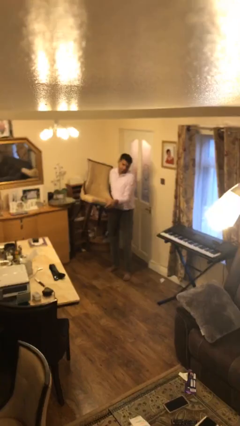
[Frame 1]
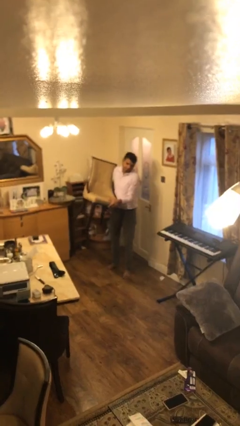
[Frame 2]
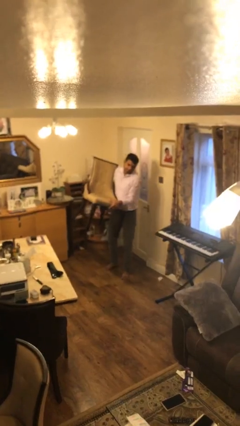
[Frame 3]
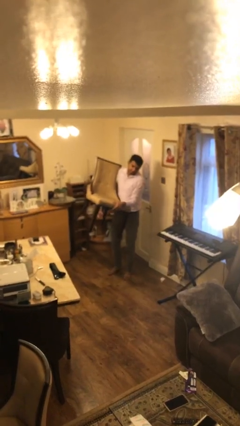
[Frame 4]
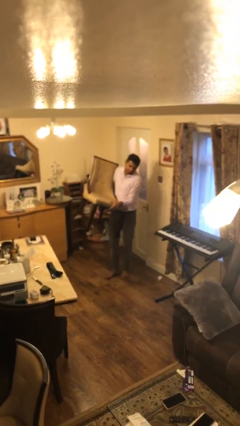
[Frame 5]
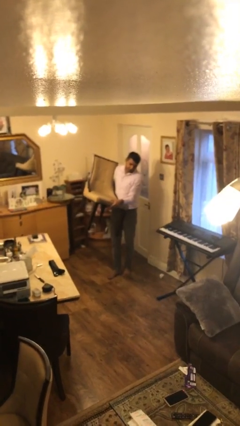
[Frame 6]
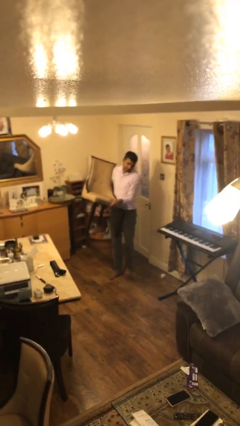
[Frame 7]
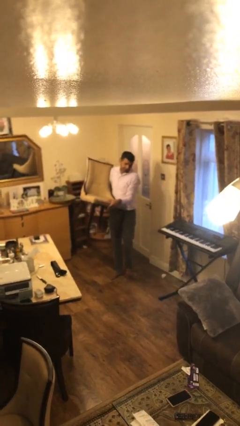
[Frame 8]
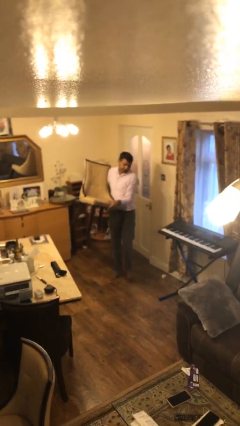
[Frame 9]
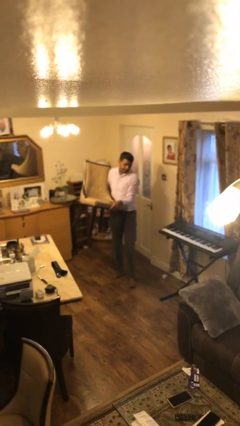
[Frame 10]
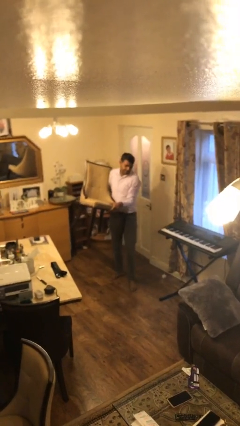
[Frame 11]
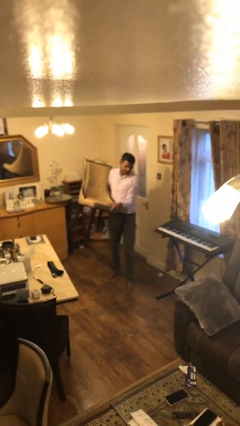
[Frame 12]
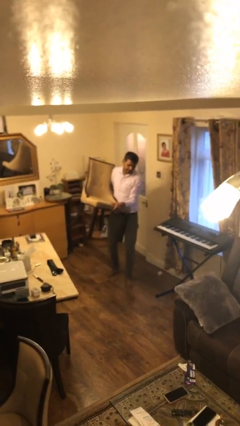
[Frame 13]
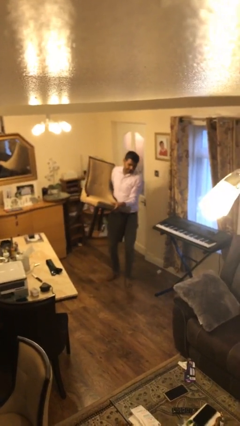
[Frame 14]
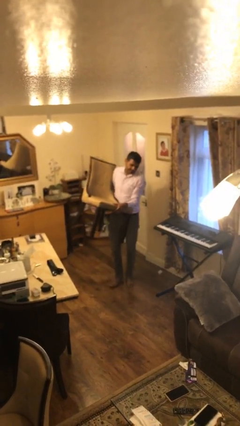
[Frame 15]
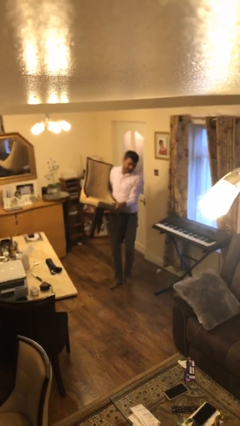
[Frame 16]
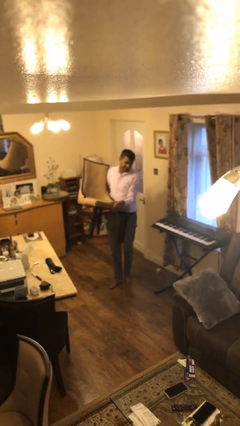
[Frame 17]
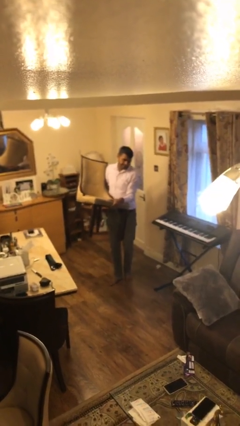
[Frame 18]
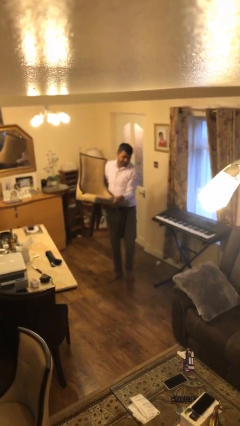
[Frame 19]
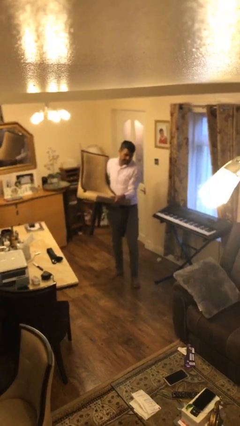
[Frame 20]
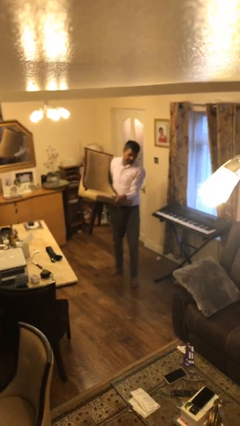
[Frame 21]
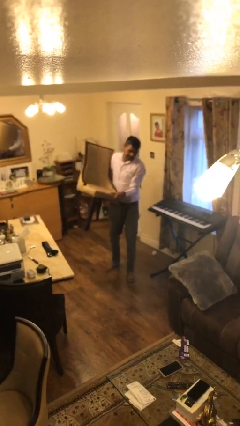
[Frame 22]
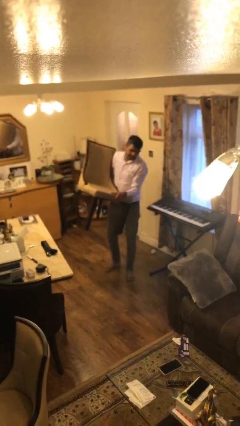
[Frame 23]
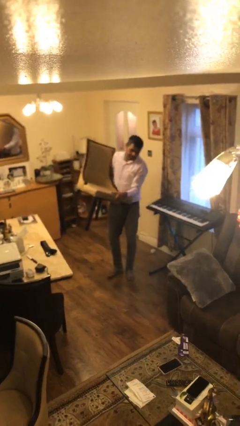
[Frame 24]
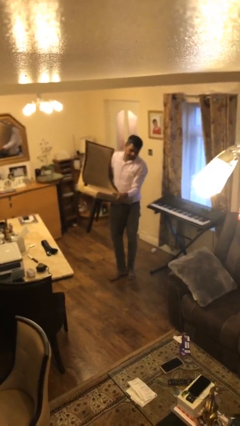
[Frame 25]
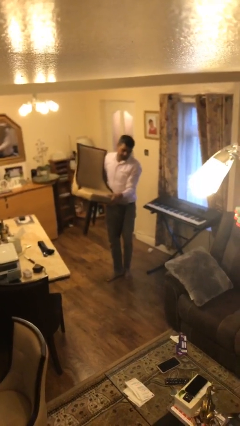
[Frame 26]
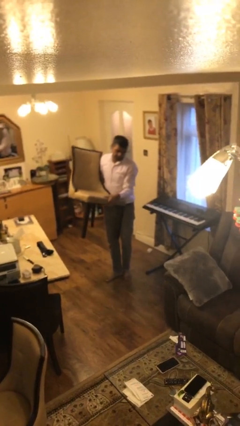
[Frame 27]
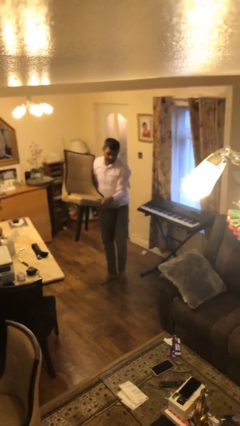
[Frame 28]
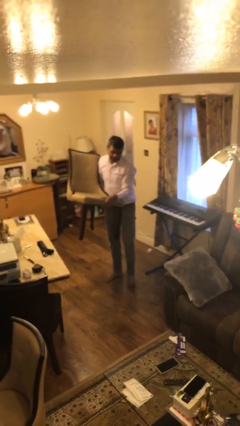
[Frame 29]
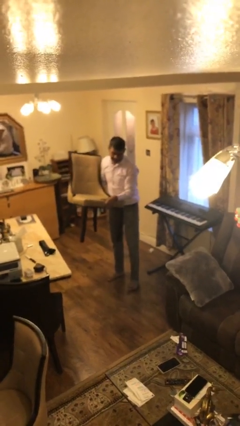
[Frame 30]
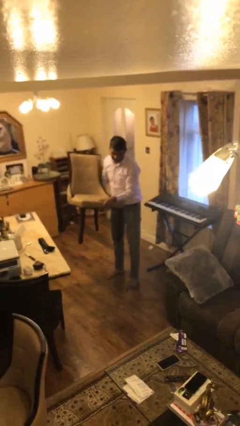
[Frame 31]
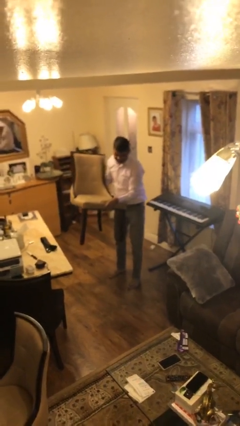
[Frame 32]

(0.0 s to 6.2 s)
person carries heavy object

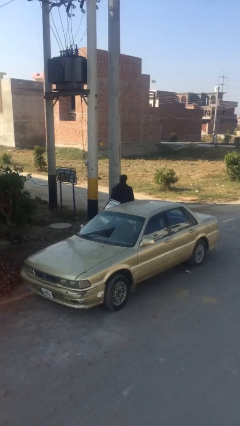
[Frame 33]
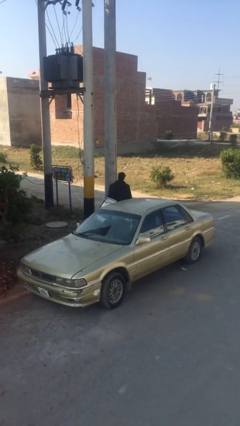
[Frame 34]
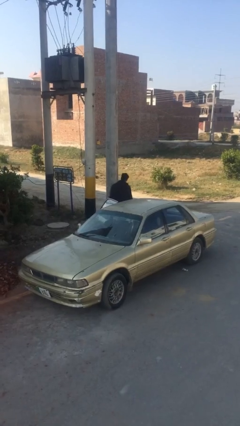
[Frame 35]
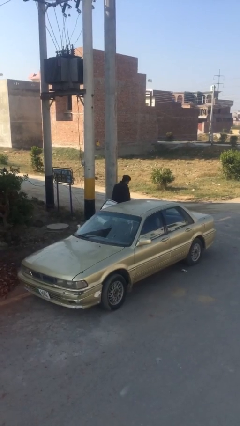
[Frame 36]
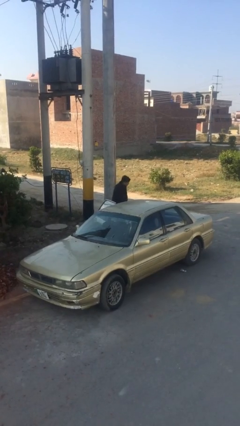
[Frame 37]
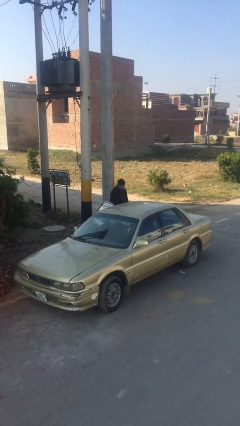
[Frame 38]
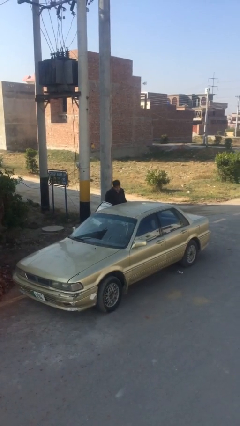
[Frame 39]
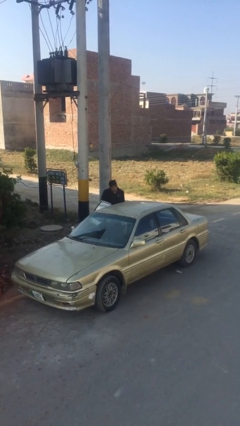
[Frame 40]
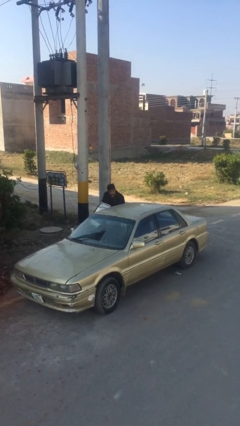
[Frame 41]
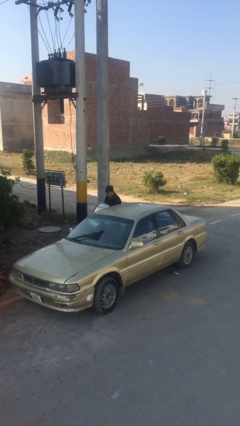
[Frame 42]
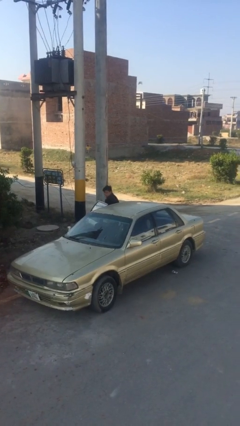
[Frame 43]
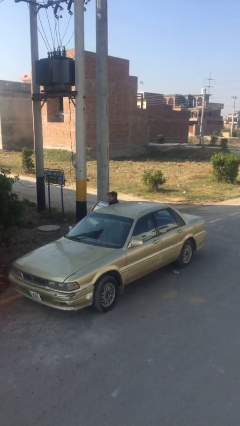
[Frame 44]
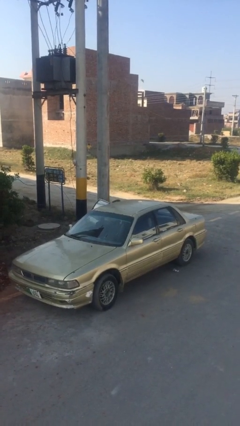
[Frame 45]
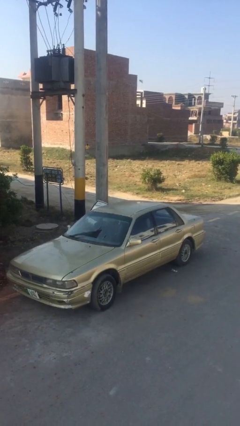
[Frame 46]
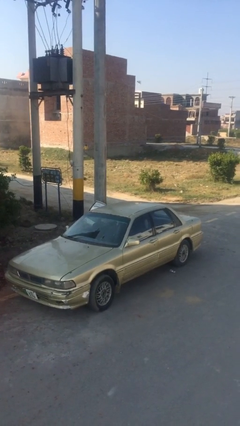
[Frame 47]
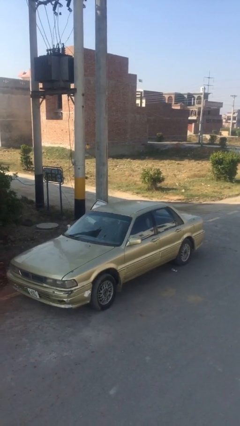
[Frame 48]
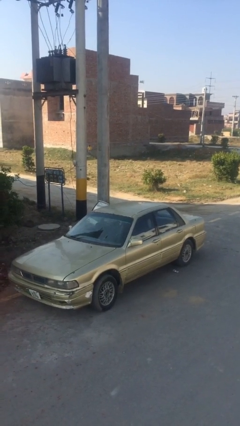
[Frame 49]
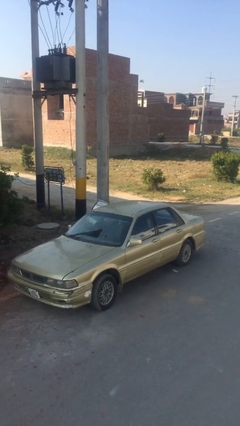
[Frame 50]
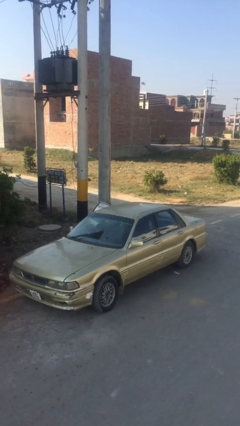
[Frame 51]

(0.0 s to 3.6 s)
person enters car

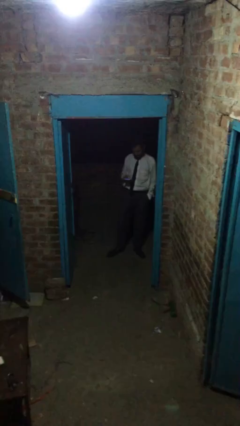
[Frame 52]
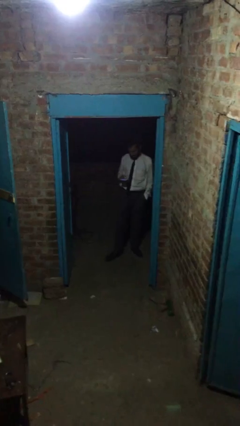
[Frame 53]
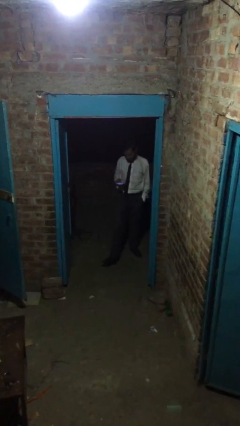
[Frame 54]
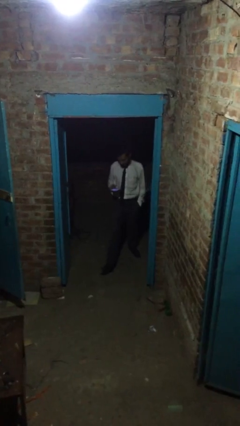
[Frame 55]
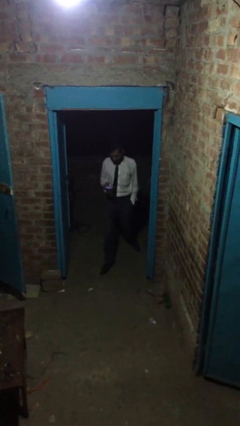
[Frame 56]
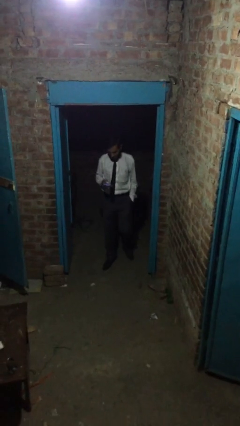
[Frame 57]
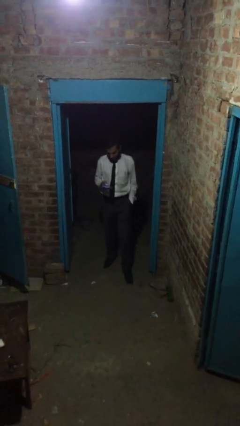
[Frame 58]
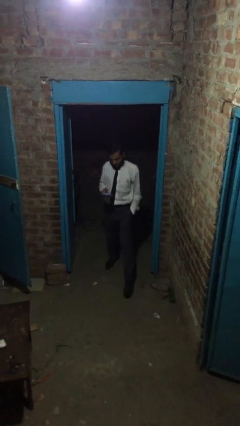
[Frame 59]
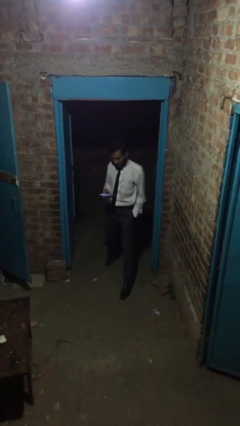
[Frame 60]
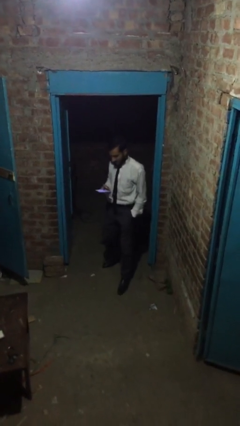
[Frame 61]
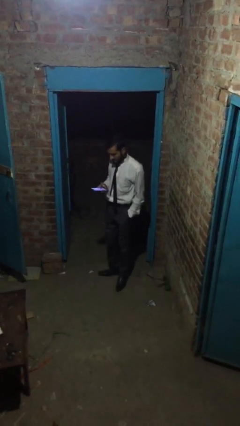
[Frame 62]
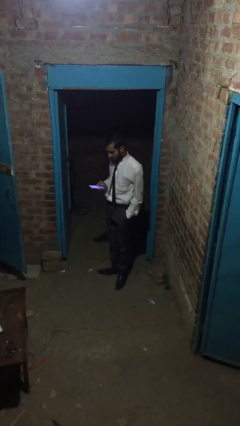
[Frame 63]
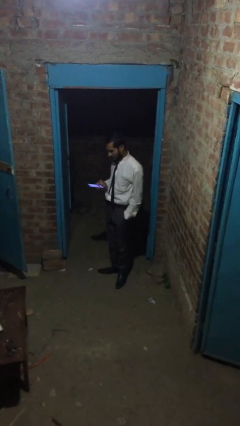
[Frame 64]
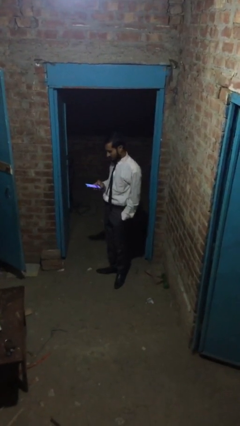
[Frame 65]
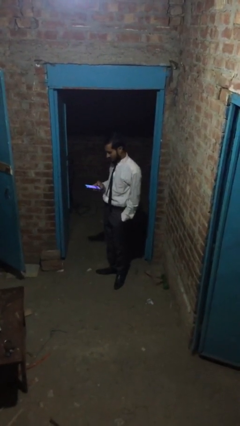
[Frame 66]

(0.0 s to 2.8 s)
person enters scene through structure

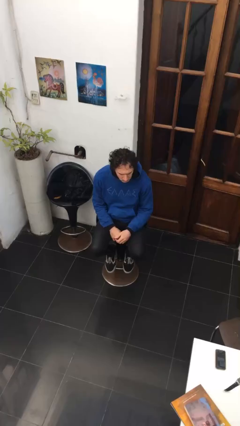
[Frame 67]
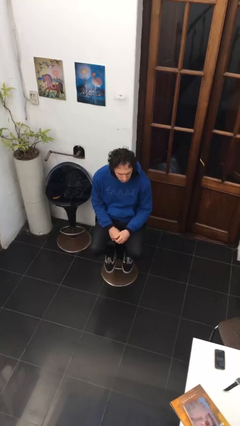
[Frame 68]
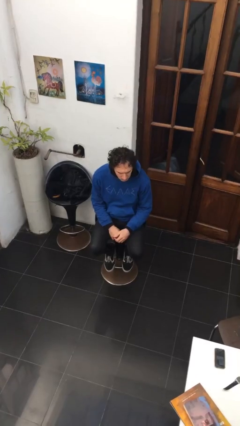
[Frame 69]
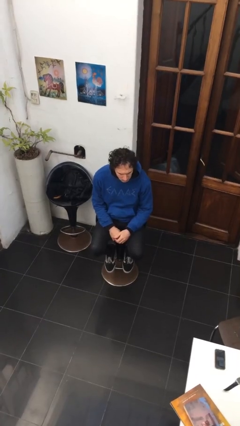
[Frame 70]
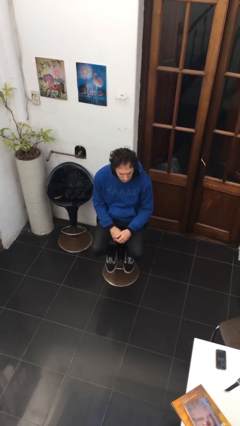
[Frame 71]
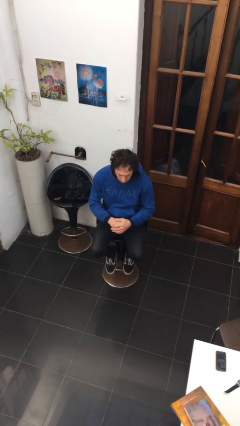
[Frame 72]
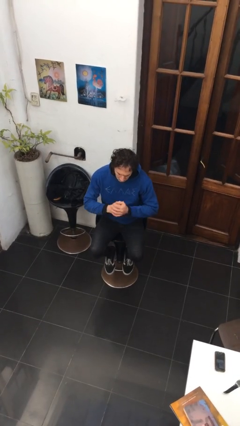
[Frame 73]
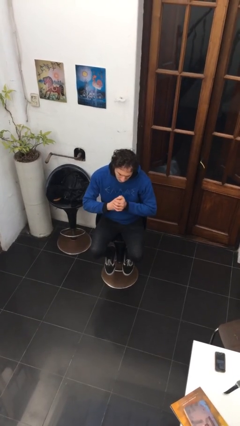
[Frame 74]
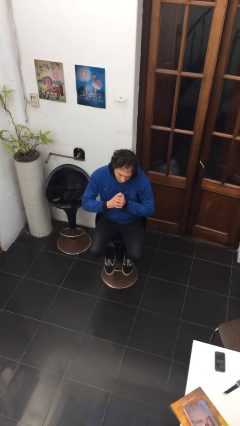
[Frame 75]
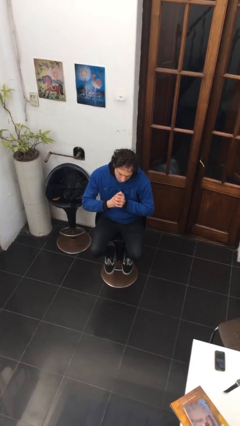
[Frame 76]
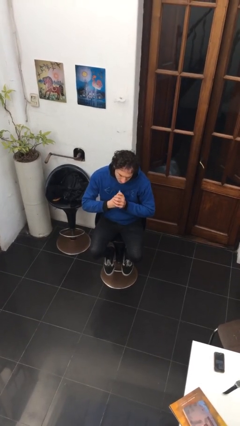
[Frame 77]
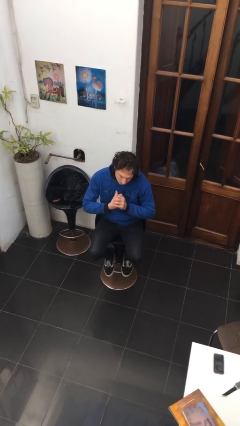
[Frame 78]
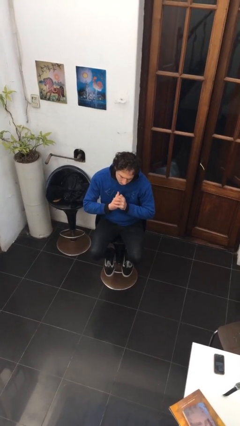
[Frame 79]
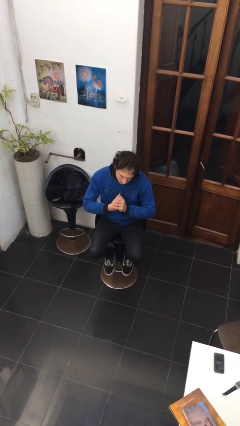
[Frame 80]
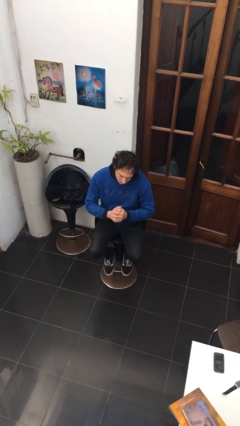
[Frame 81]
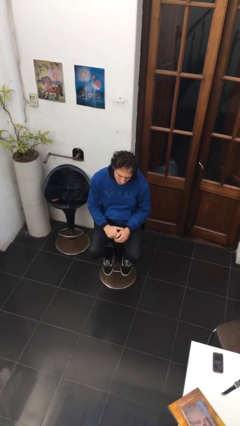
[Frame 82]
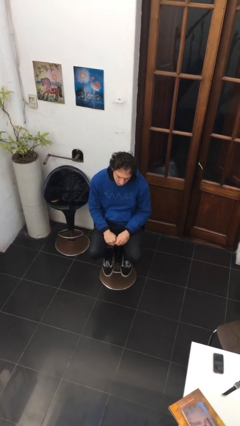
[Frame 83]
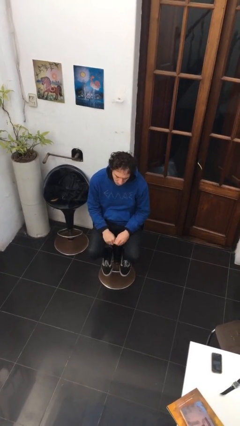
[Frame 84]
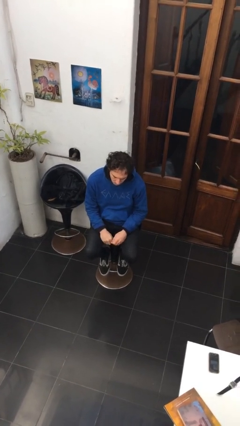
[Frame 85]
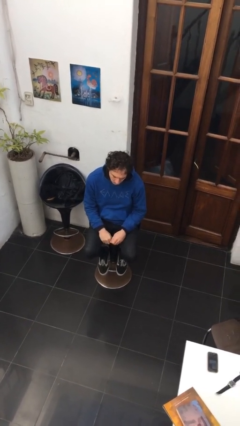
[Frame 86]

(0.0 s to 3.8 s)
person cracks knuckles

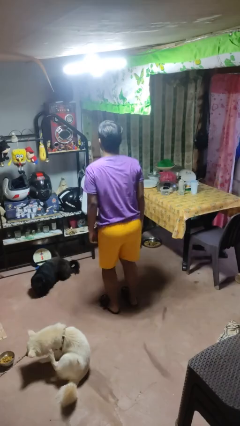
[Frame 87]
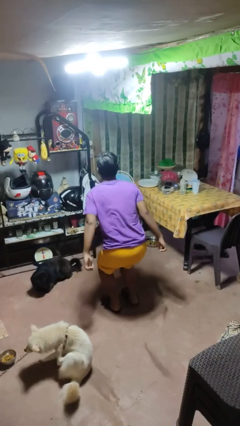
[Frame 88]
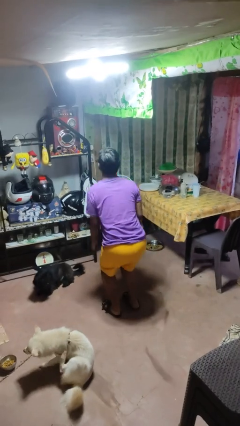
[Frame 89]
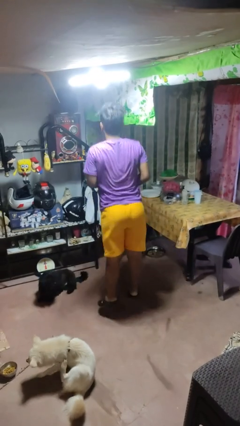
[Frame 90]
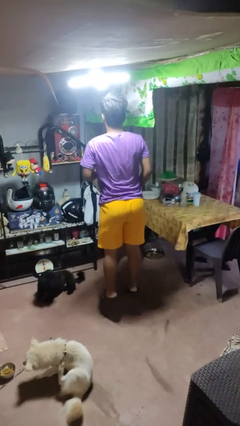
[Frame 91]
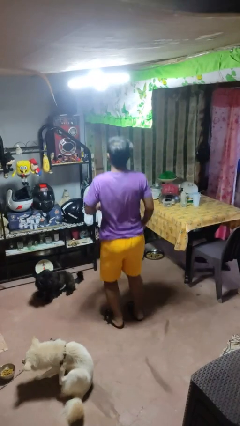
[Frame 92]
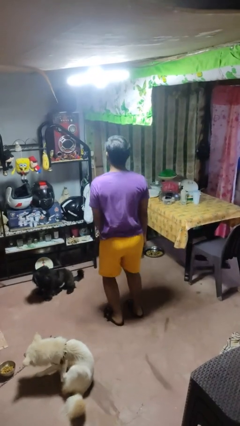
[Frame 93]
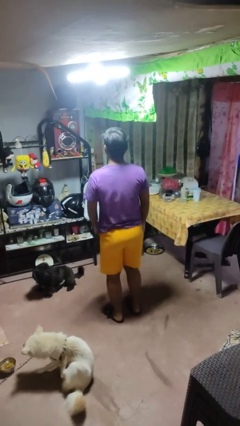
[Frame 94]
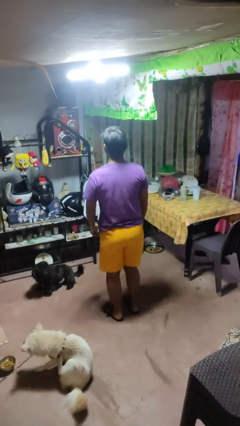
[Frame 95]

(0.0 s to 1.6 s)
person jumps
